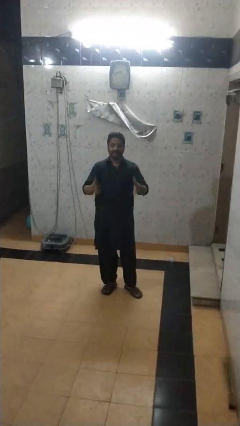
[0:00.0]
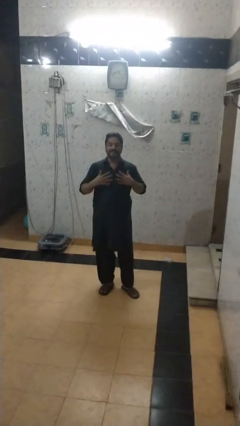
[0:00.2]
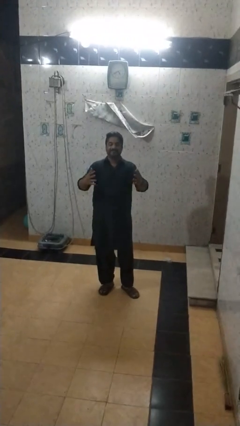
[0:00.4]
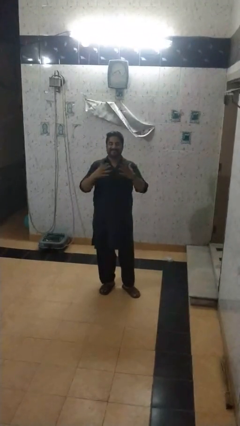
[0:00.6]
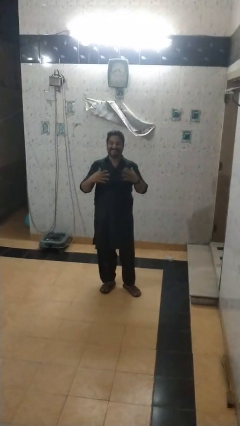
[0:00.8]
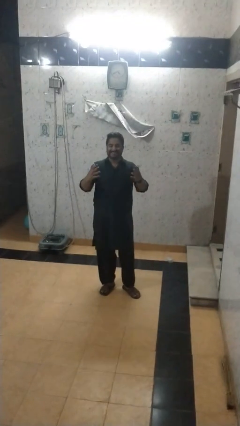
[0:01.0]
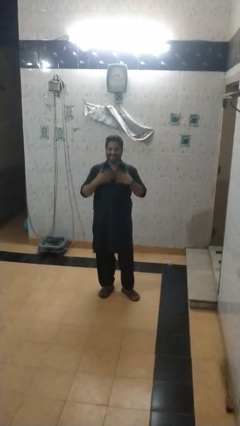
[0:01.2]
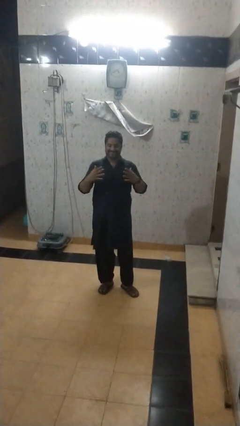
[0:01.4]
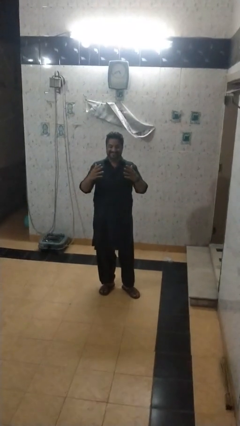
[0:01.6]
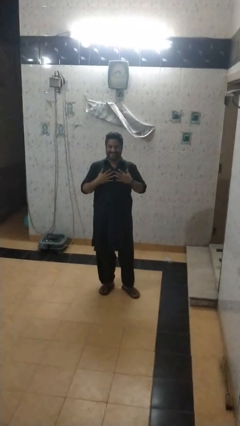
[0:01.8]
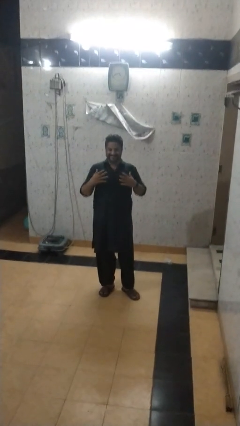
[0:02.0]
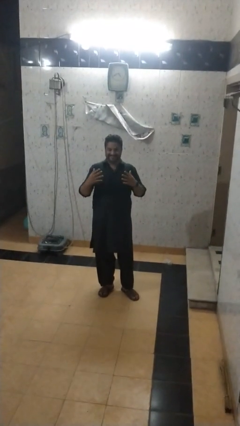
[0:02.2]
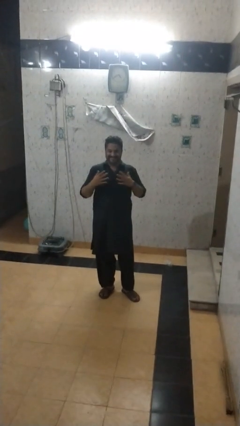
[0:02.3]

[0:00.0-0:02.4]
person drums on chest

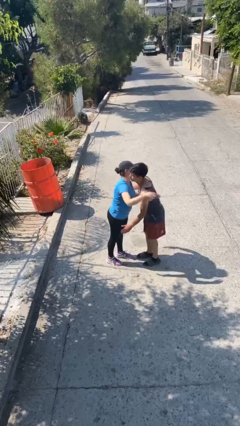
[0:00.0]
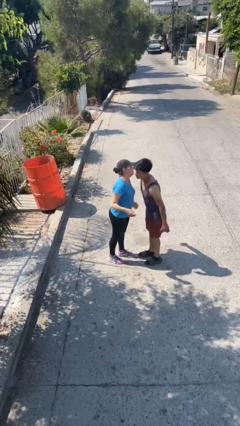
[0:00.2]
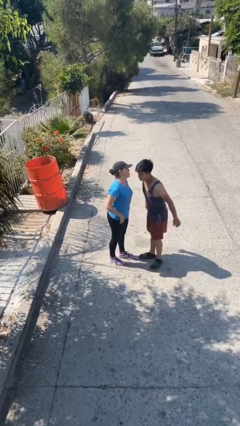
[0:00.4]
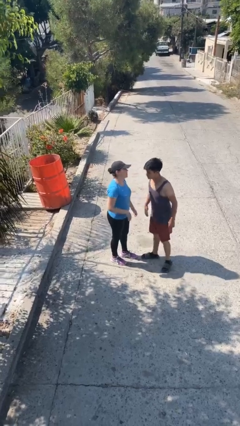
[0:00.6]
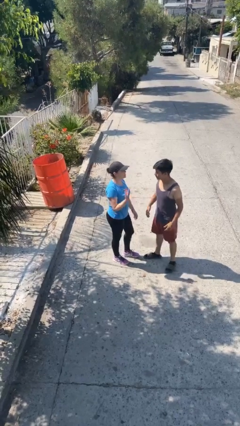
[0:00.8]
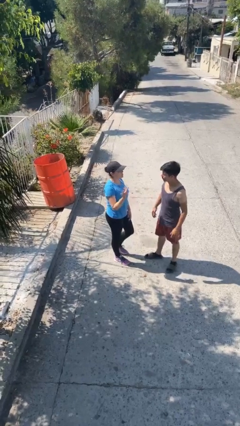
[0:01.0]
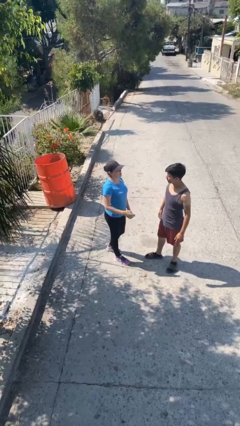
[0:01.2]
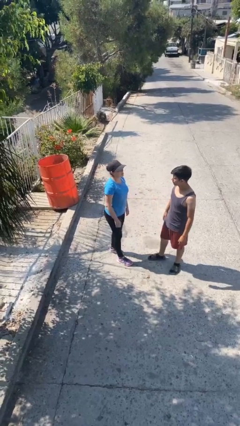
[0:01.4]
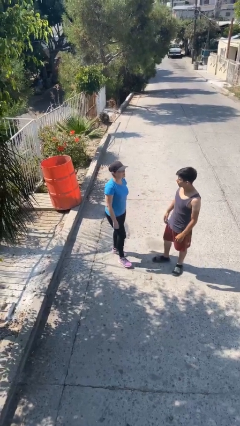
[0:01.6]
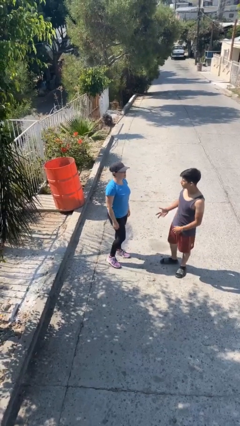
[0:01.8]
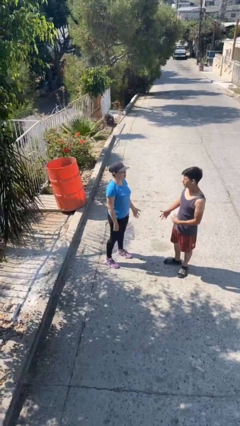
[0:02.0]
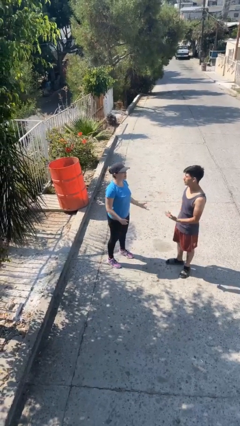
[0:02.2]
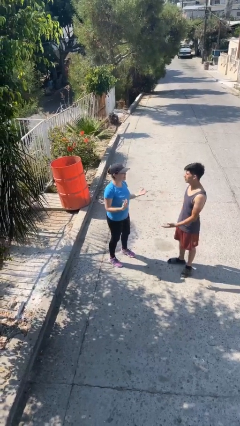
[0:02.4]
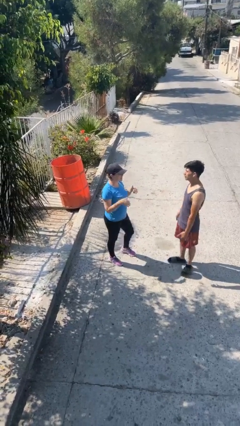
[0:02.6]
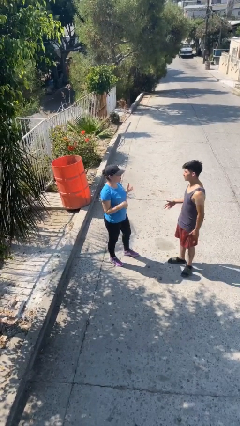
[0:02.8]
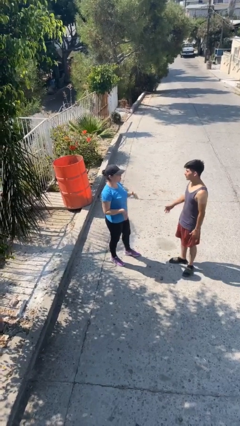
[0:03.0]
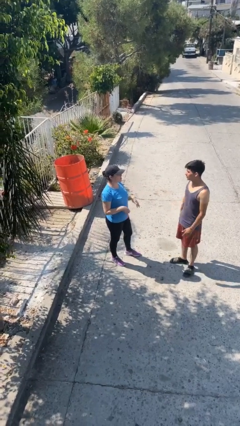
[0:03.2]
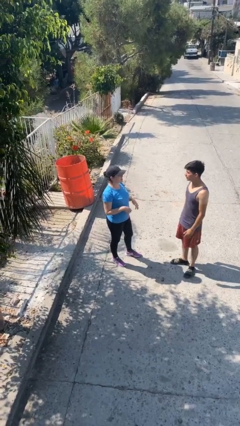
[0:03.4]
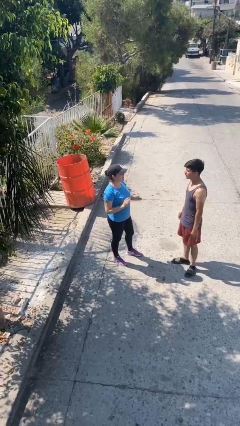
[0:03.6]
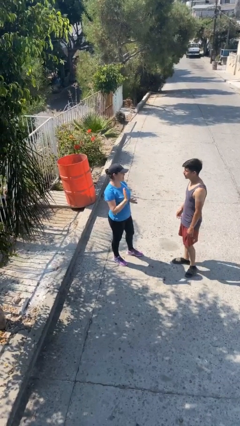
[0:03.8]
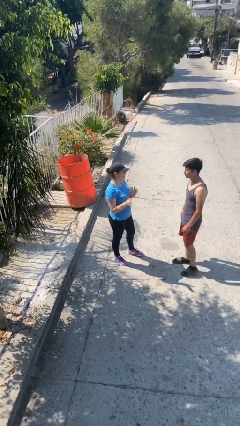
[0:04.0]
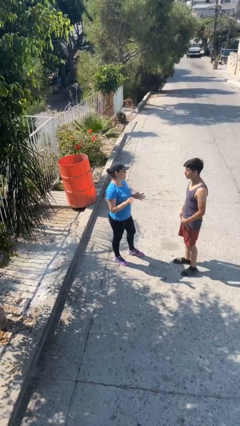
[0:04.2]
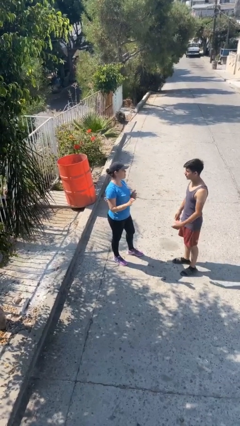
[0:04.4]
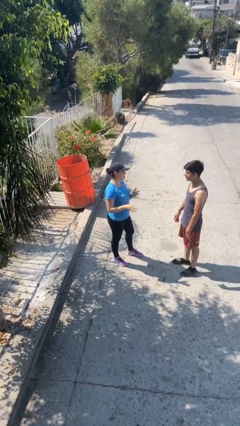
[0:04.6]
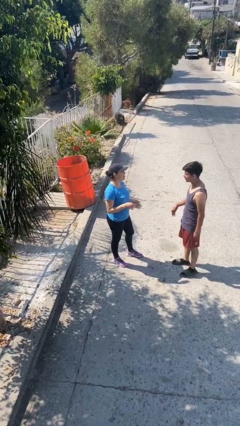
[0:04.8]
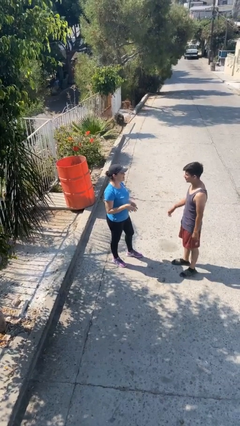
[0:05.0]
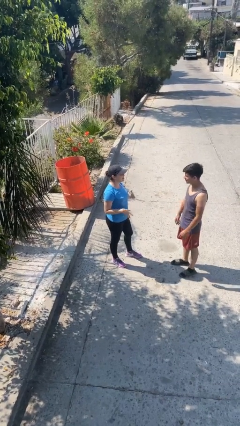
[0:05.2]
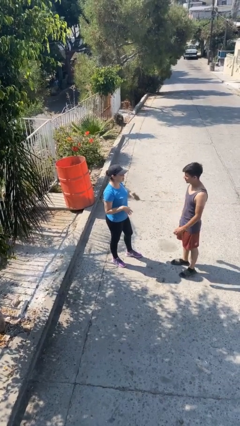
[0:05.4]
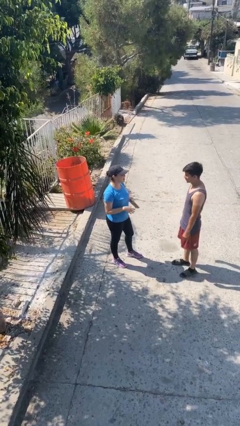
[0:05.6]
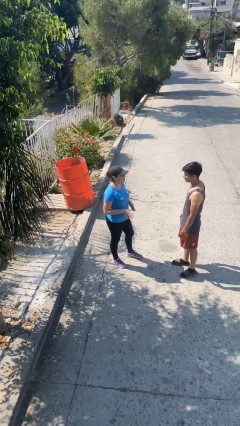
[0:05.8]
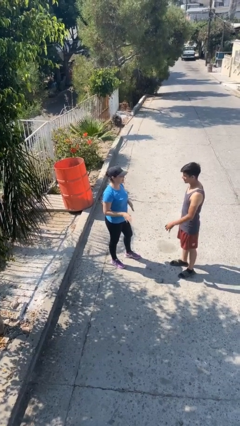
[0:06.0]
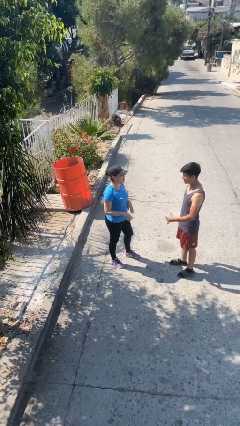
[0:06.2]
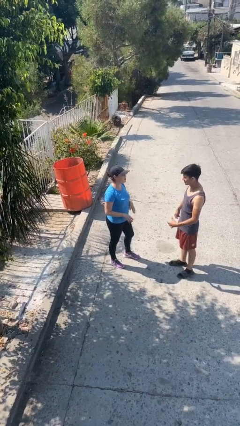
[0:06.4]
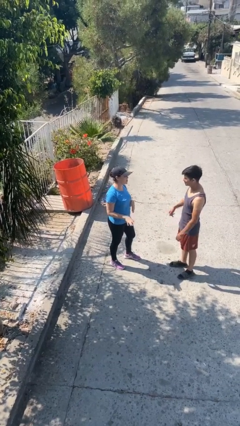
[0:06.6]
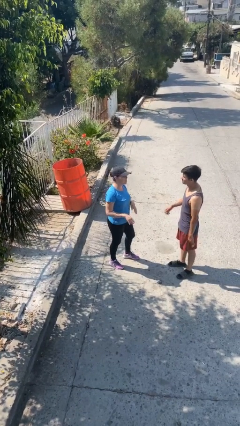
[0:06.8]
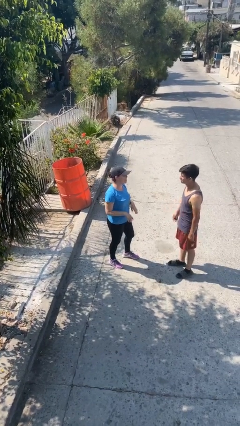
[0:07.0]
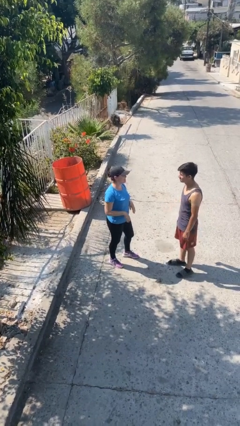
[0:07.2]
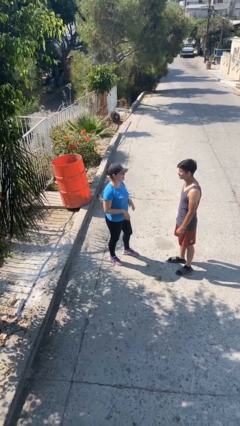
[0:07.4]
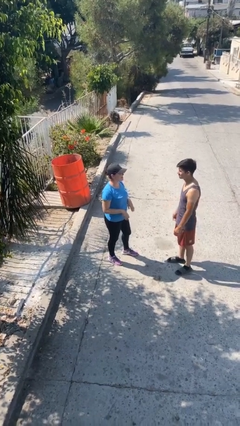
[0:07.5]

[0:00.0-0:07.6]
person talks to person

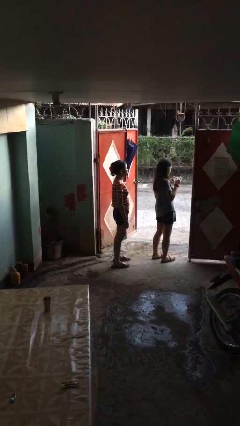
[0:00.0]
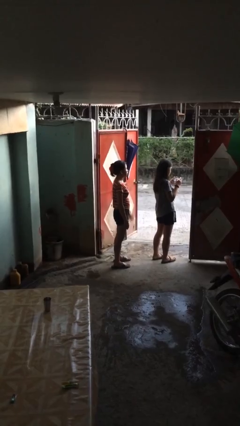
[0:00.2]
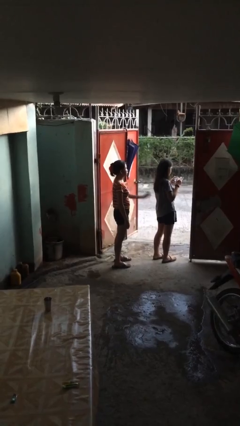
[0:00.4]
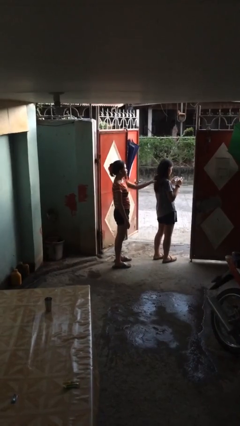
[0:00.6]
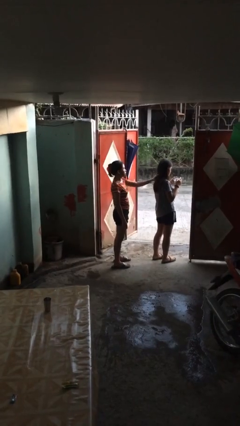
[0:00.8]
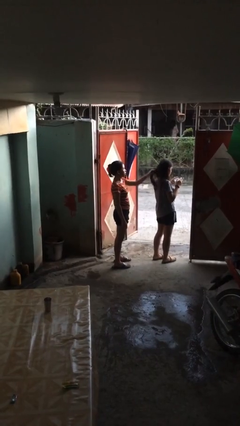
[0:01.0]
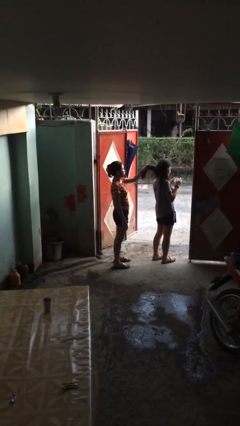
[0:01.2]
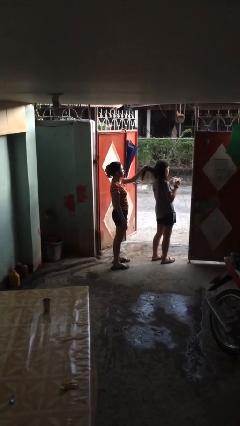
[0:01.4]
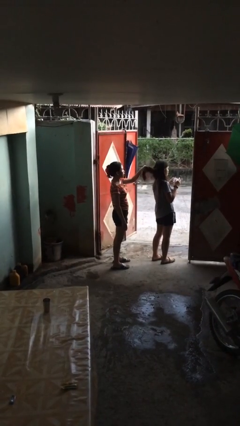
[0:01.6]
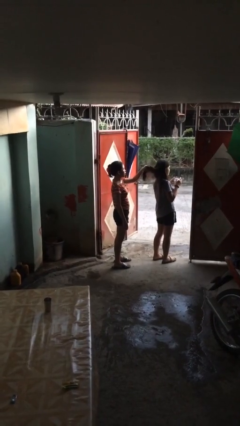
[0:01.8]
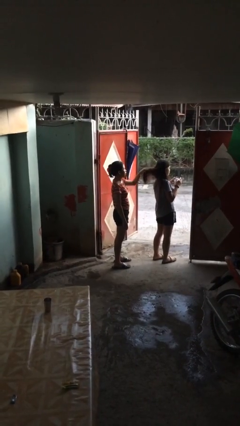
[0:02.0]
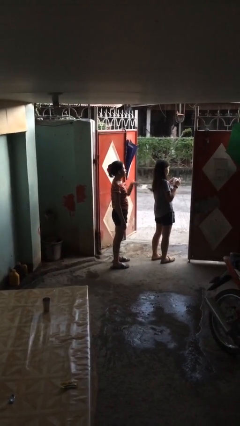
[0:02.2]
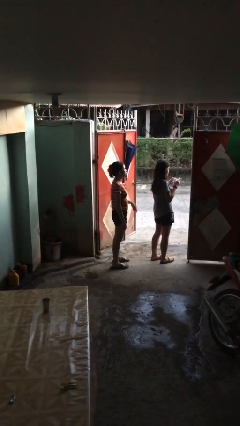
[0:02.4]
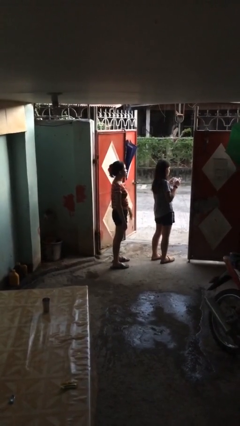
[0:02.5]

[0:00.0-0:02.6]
person grabs person by hair

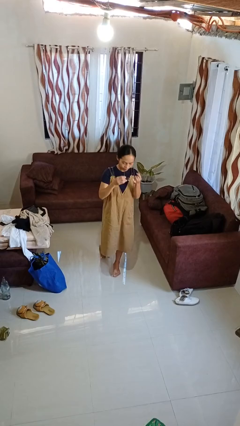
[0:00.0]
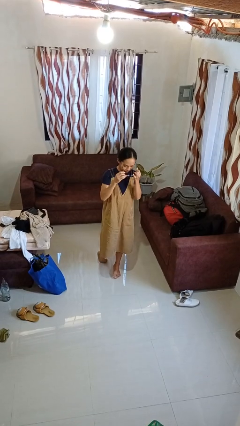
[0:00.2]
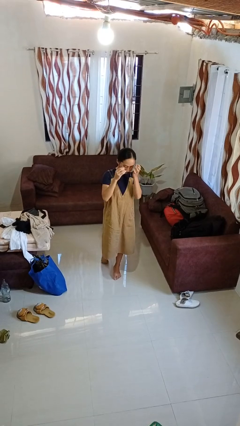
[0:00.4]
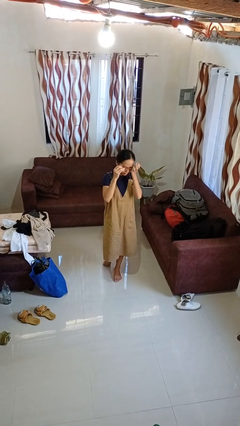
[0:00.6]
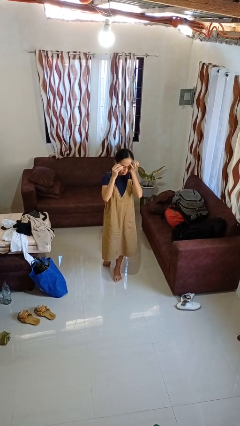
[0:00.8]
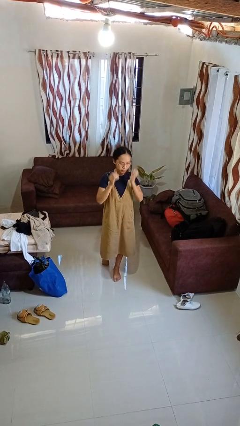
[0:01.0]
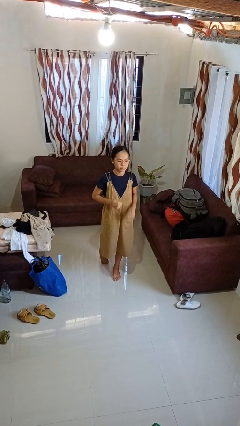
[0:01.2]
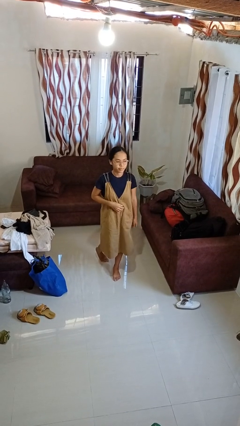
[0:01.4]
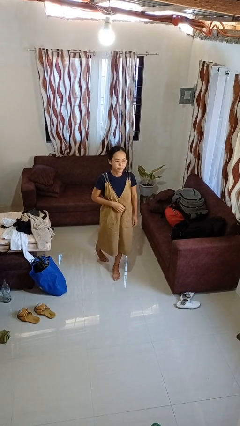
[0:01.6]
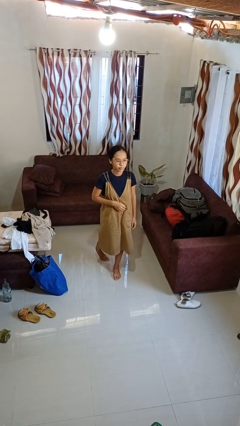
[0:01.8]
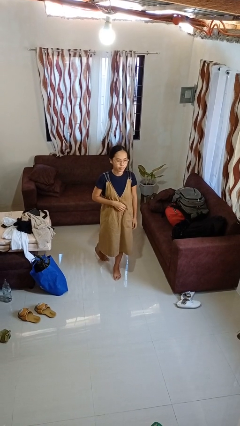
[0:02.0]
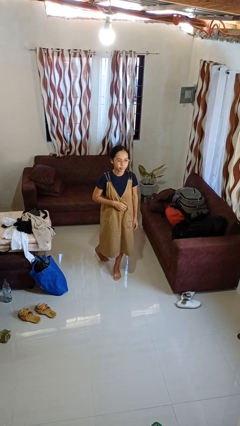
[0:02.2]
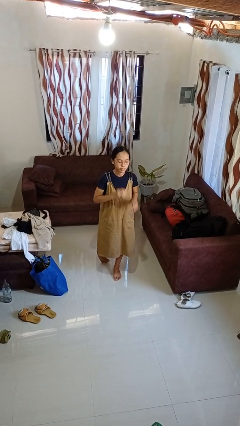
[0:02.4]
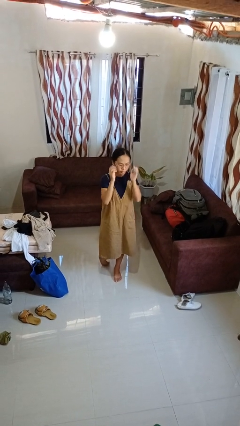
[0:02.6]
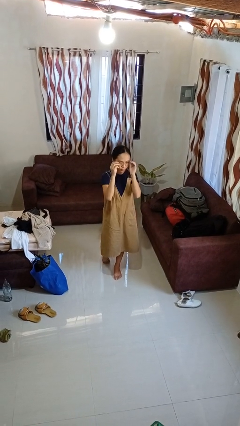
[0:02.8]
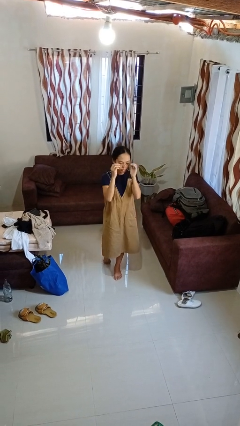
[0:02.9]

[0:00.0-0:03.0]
person puts on glasses

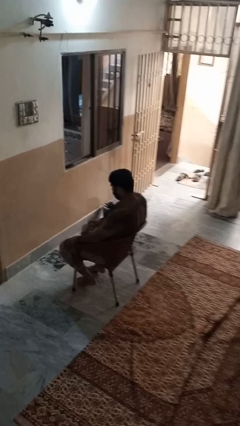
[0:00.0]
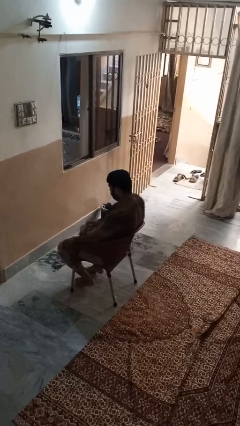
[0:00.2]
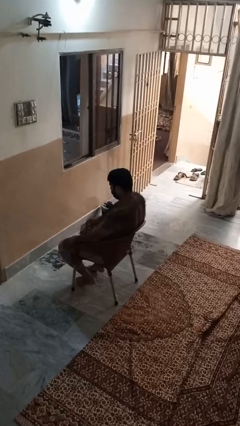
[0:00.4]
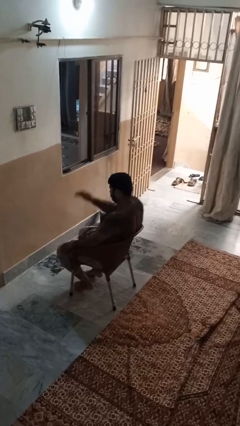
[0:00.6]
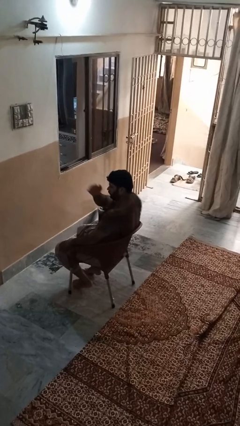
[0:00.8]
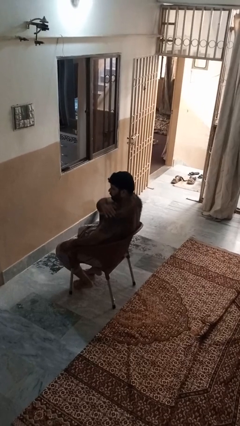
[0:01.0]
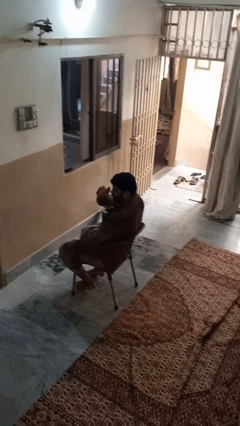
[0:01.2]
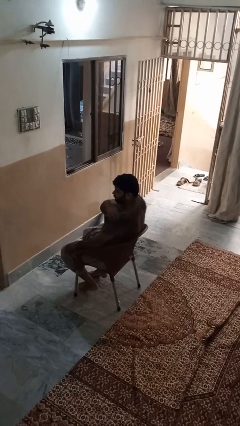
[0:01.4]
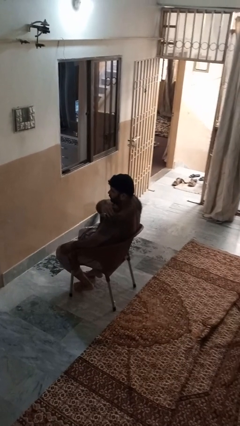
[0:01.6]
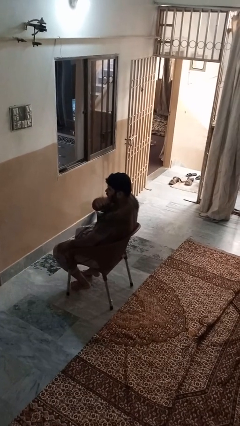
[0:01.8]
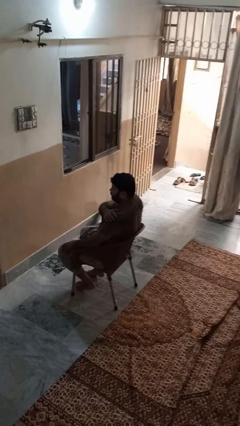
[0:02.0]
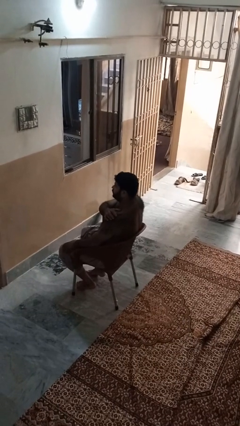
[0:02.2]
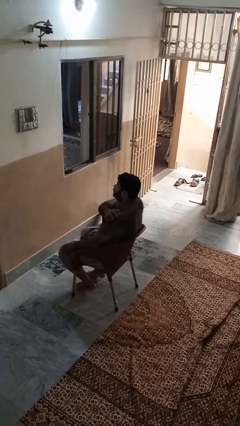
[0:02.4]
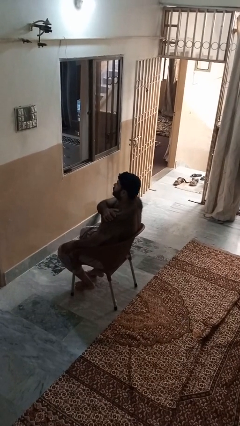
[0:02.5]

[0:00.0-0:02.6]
person shrugs
